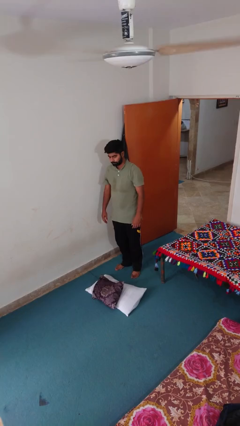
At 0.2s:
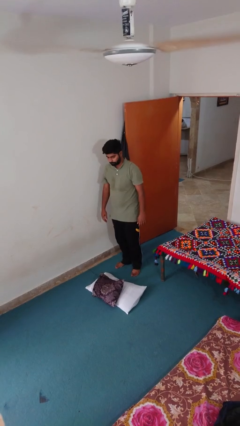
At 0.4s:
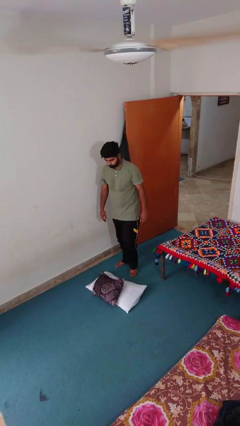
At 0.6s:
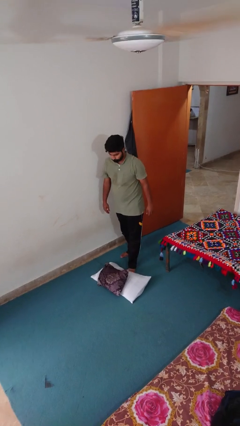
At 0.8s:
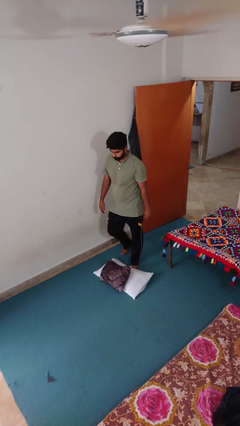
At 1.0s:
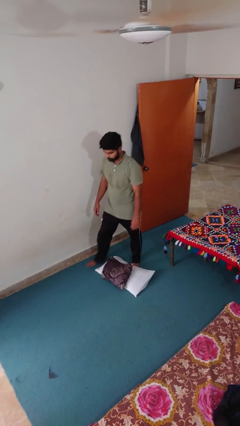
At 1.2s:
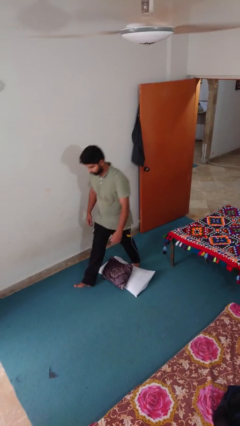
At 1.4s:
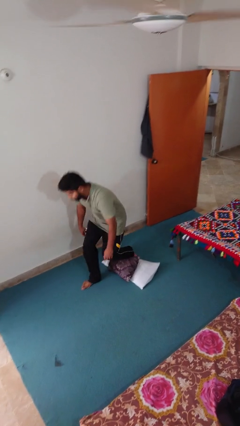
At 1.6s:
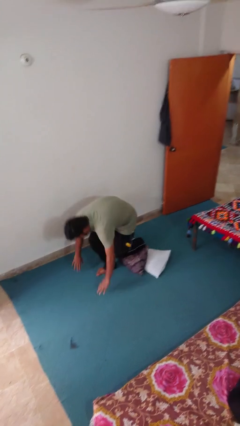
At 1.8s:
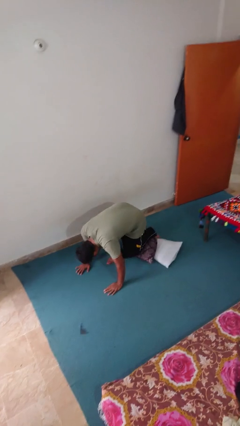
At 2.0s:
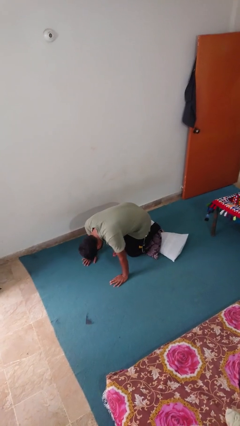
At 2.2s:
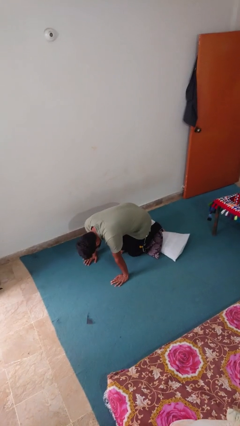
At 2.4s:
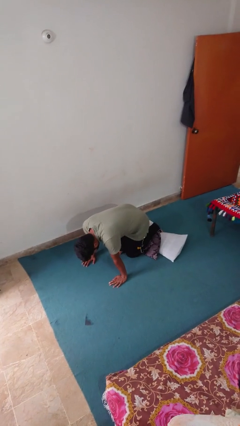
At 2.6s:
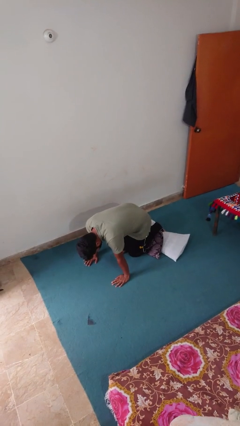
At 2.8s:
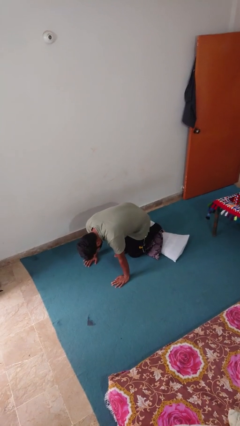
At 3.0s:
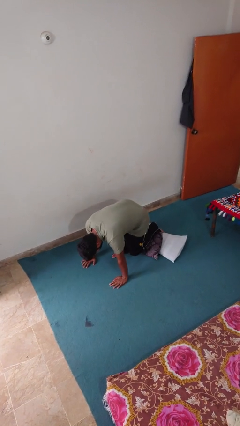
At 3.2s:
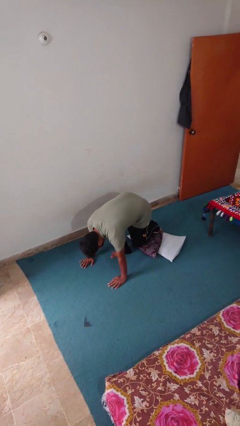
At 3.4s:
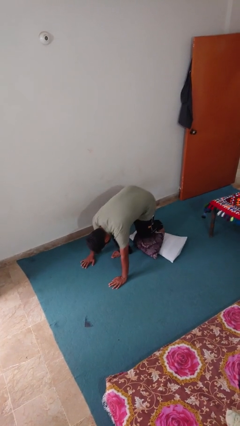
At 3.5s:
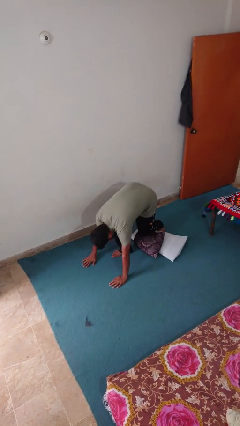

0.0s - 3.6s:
person trips on object on floor

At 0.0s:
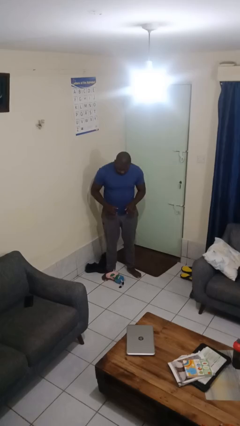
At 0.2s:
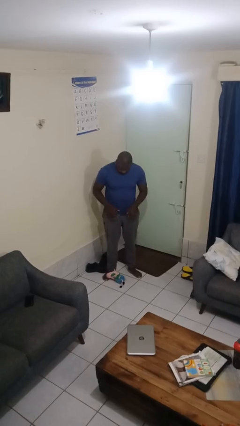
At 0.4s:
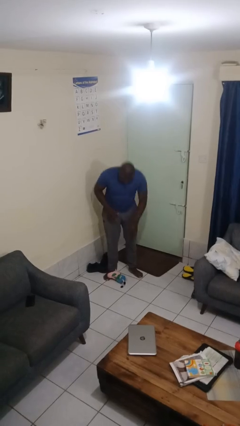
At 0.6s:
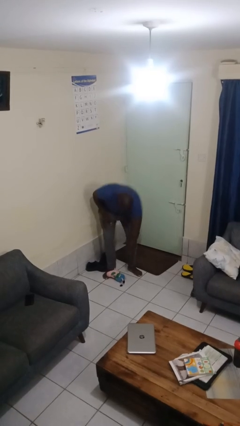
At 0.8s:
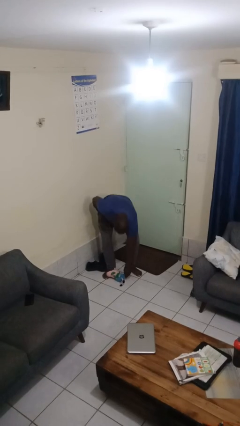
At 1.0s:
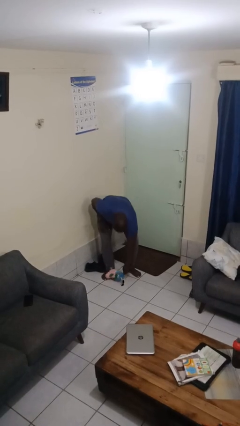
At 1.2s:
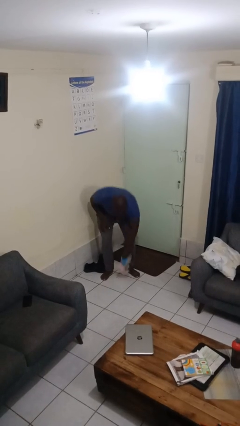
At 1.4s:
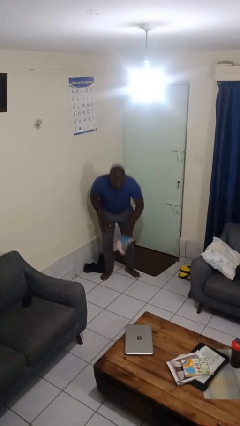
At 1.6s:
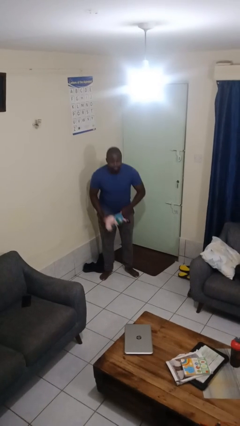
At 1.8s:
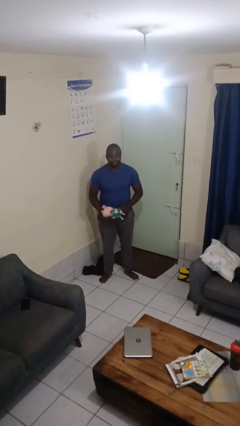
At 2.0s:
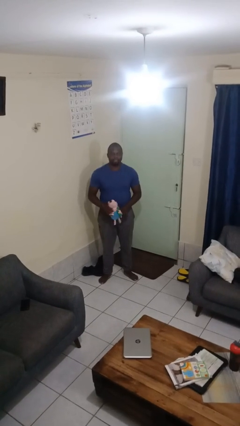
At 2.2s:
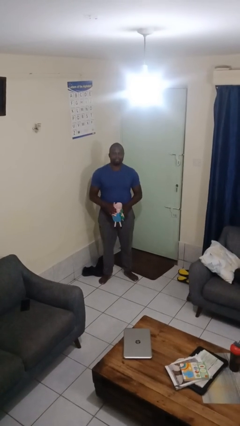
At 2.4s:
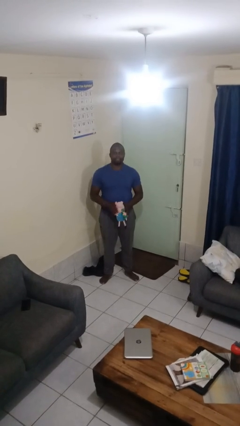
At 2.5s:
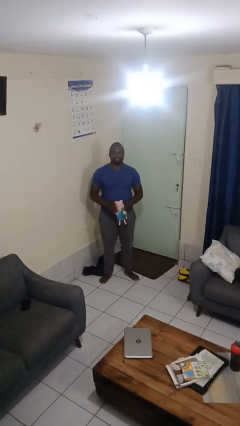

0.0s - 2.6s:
person picks up object from floor

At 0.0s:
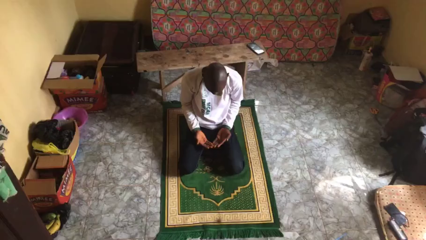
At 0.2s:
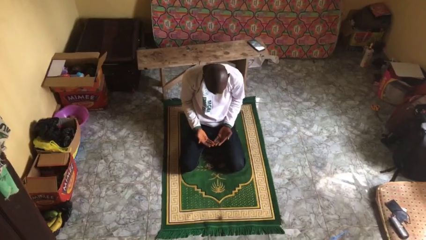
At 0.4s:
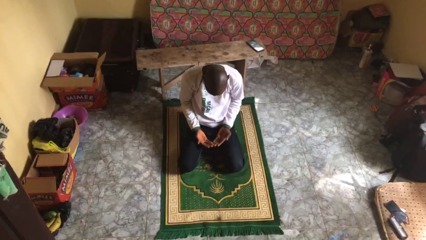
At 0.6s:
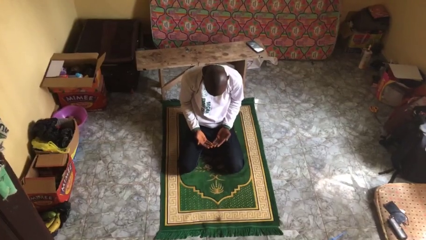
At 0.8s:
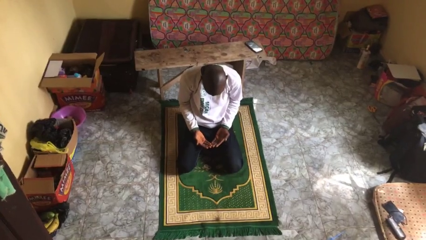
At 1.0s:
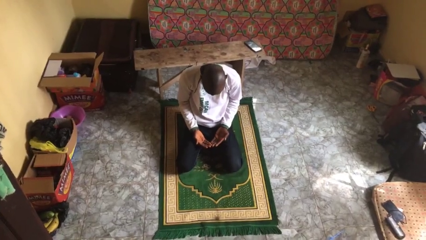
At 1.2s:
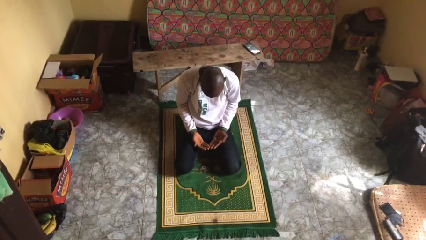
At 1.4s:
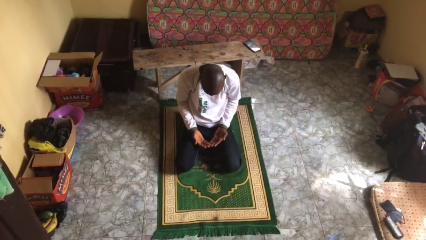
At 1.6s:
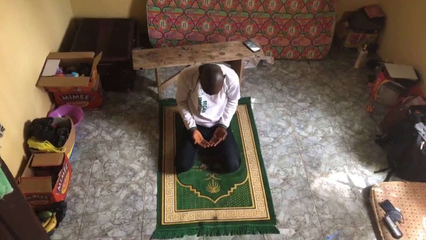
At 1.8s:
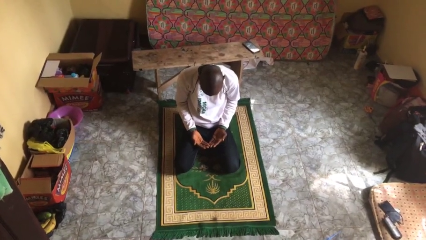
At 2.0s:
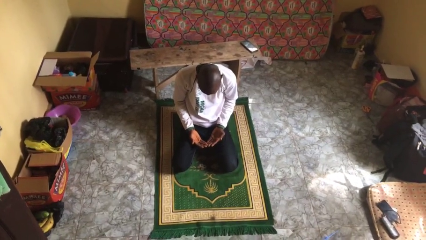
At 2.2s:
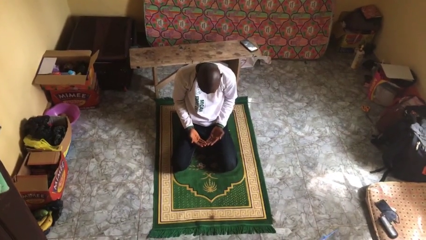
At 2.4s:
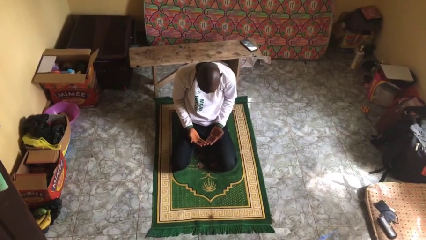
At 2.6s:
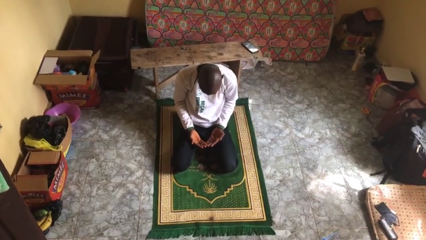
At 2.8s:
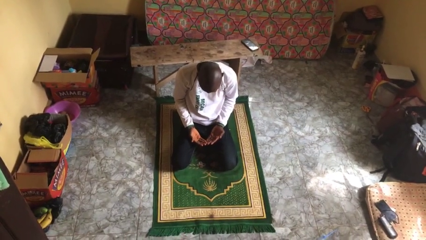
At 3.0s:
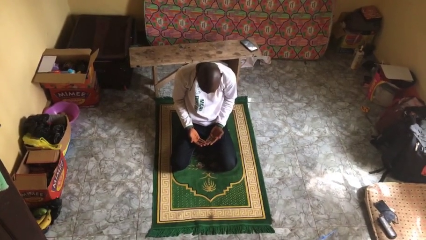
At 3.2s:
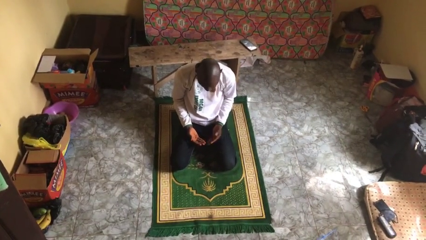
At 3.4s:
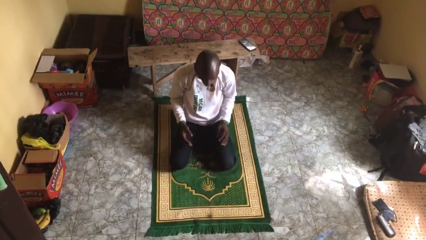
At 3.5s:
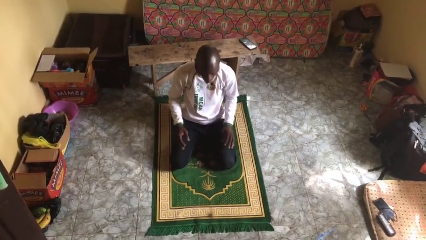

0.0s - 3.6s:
person prays

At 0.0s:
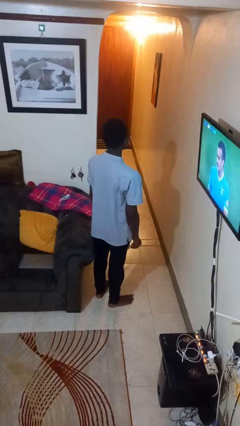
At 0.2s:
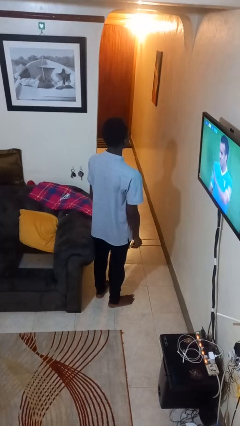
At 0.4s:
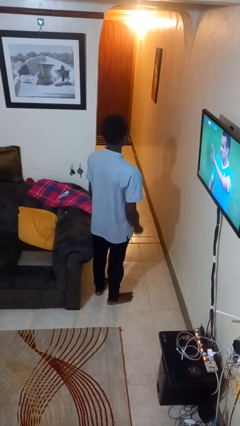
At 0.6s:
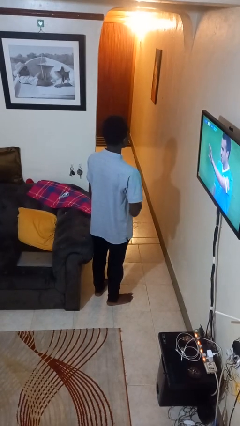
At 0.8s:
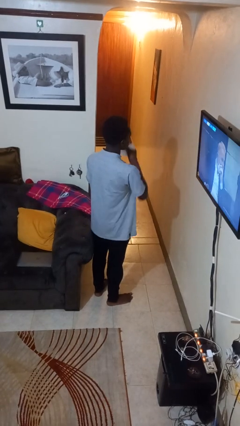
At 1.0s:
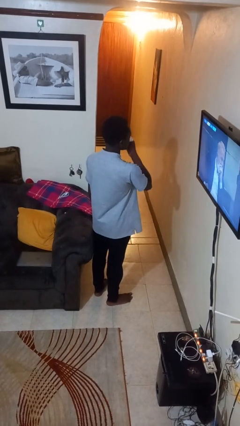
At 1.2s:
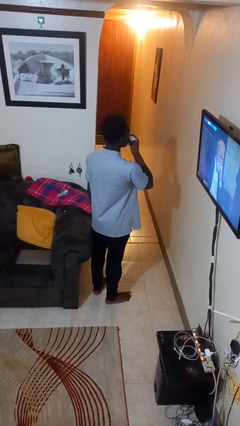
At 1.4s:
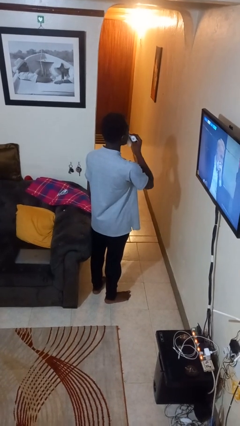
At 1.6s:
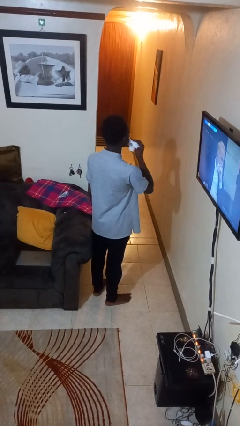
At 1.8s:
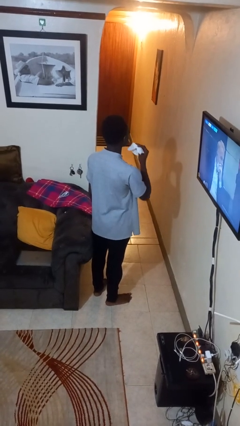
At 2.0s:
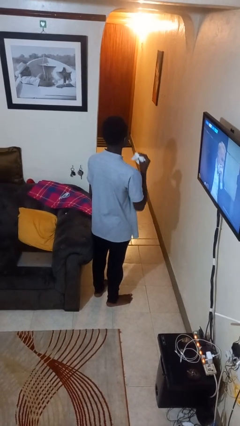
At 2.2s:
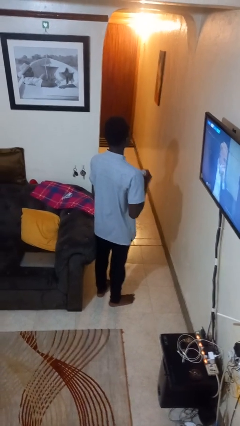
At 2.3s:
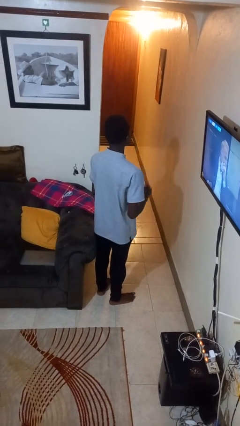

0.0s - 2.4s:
person wipes mouth with napkin

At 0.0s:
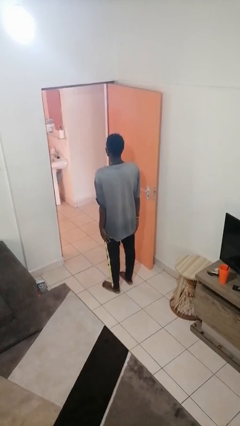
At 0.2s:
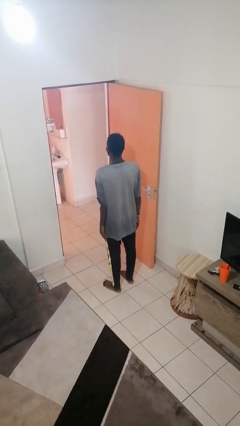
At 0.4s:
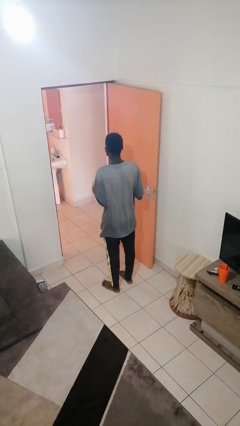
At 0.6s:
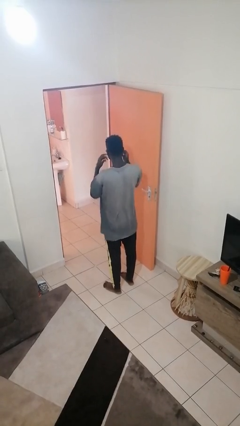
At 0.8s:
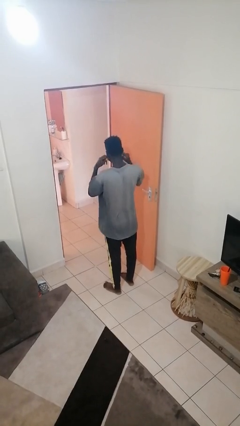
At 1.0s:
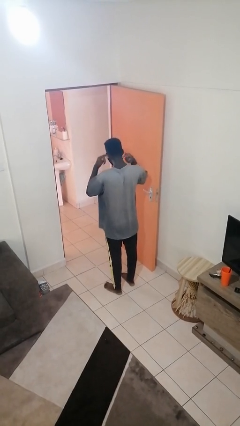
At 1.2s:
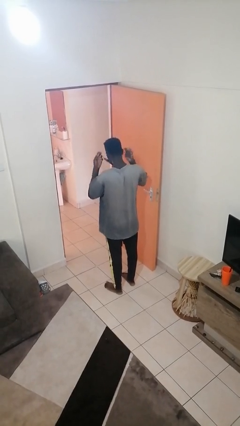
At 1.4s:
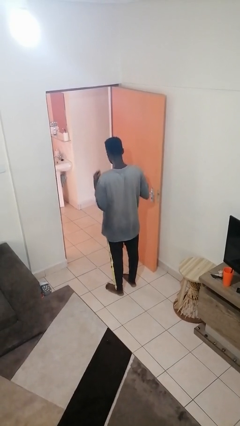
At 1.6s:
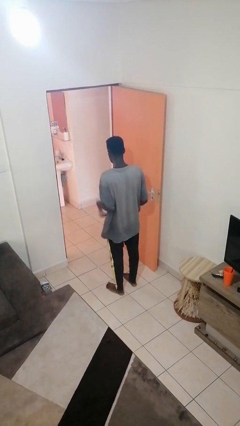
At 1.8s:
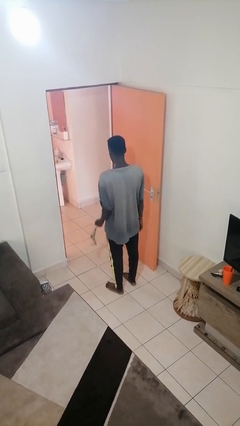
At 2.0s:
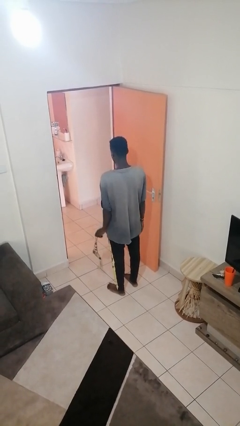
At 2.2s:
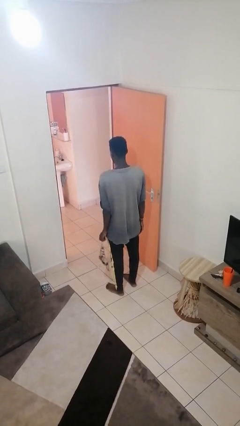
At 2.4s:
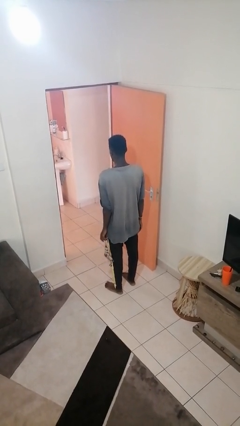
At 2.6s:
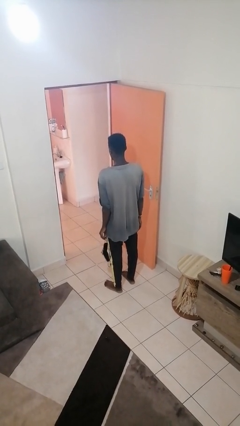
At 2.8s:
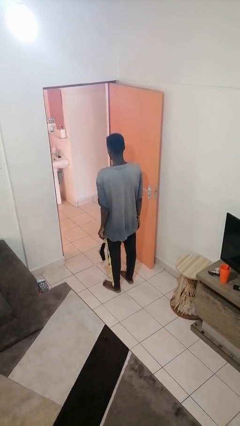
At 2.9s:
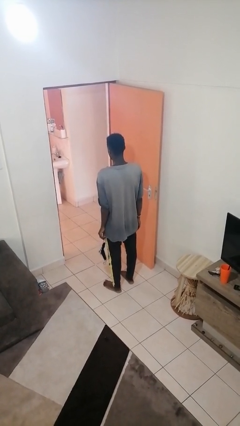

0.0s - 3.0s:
person takes off facemask

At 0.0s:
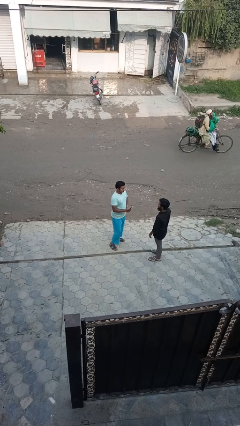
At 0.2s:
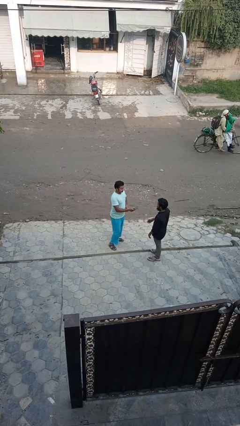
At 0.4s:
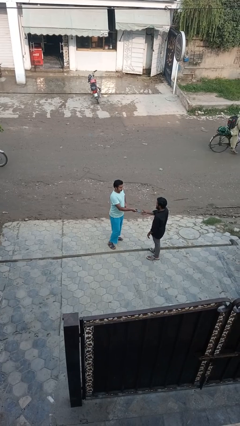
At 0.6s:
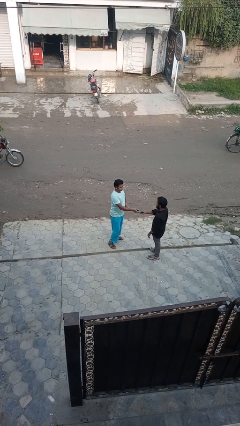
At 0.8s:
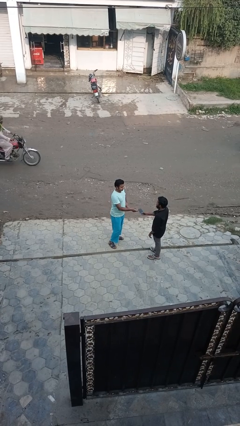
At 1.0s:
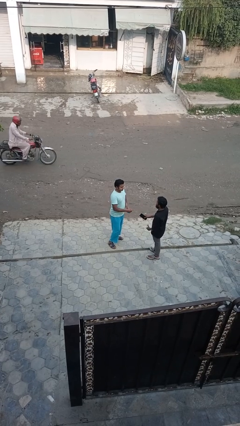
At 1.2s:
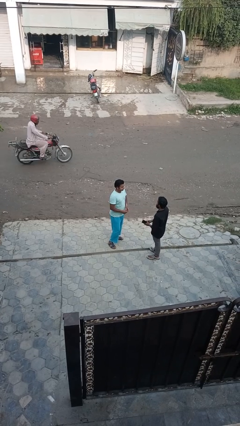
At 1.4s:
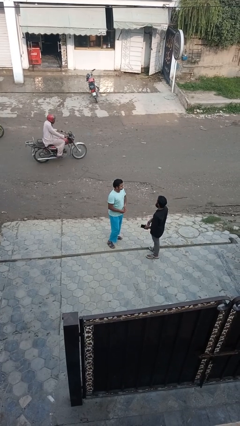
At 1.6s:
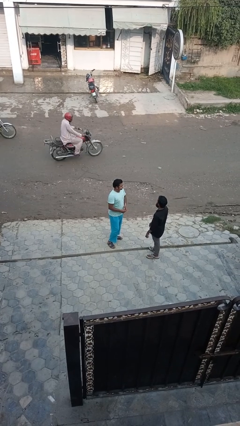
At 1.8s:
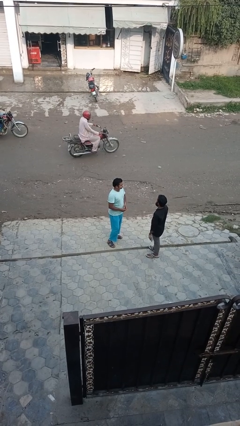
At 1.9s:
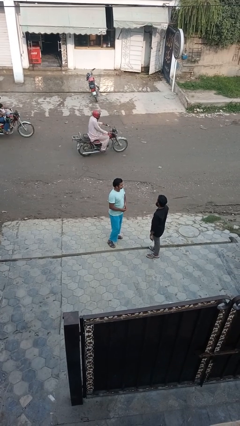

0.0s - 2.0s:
person transfers object to person

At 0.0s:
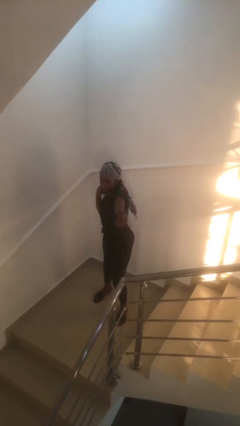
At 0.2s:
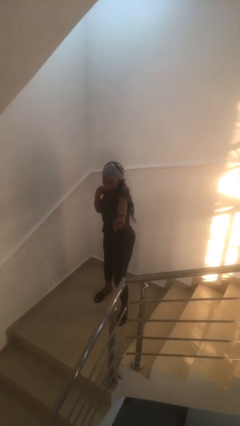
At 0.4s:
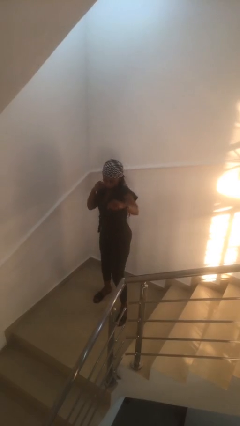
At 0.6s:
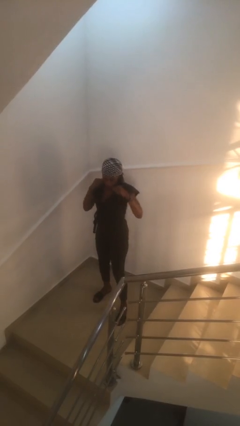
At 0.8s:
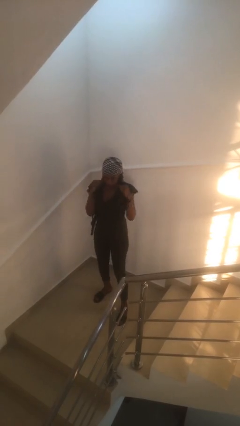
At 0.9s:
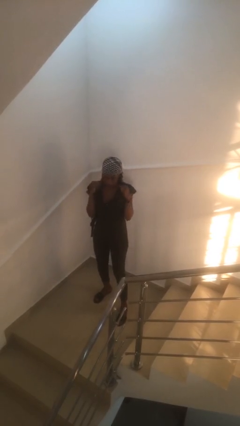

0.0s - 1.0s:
person punches
